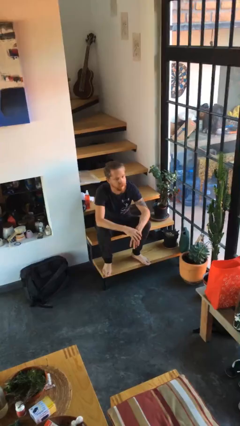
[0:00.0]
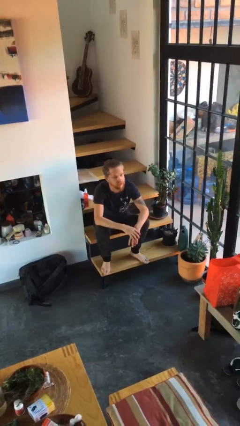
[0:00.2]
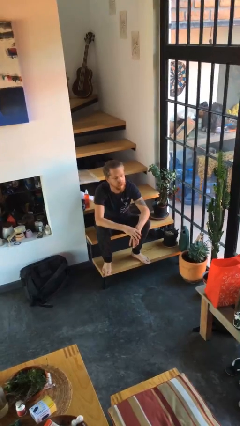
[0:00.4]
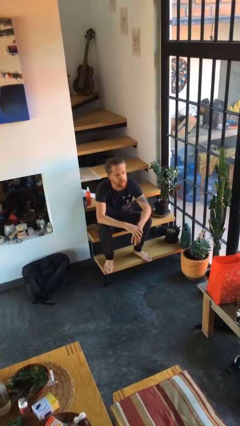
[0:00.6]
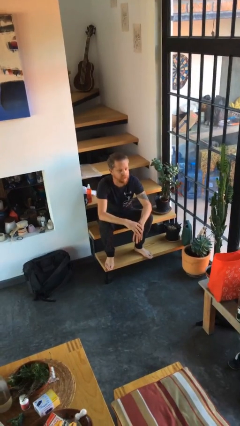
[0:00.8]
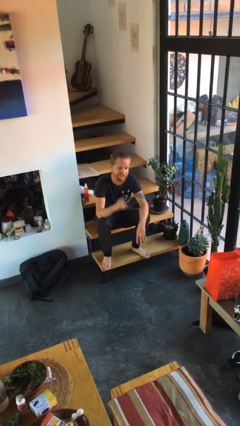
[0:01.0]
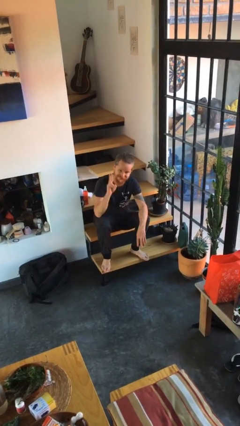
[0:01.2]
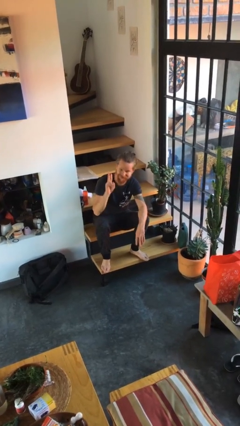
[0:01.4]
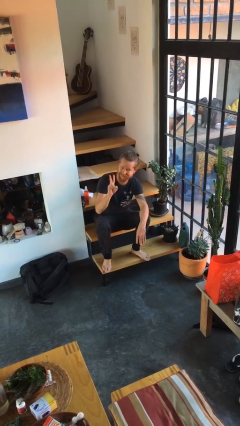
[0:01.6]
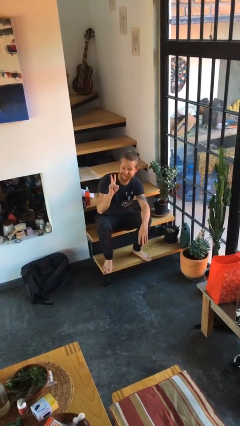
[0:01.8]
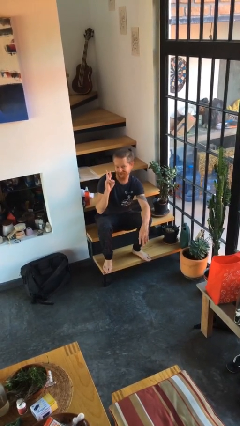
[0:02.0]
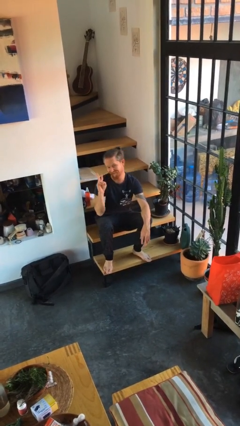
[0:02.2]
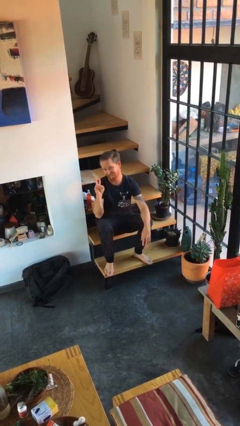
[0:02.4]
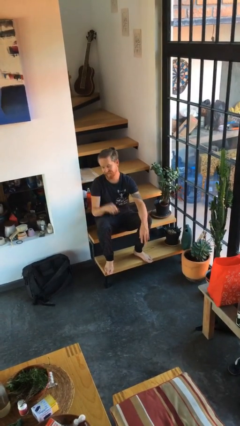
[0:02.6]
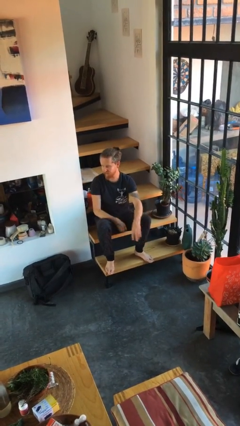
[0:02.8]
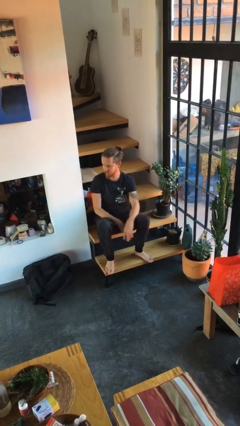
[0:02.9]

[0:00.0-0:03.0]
person gestures peace

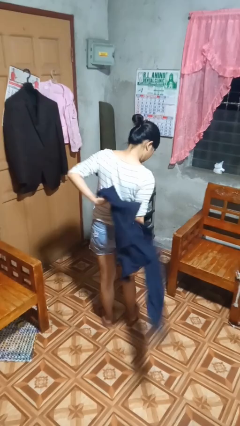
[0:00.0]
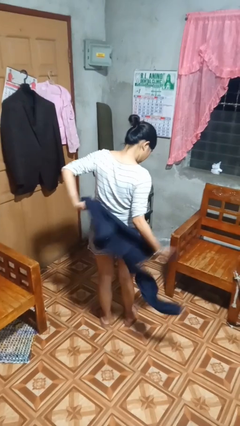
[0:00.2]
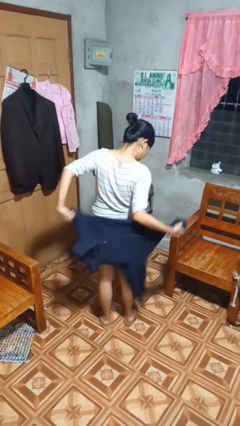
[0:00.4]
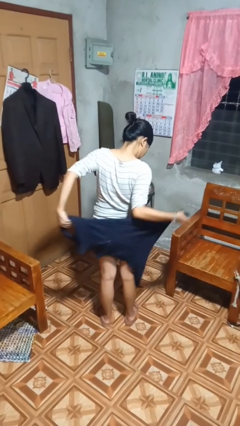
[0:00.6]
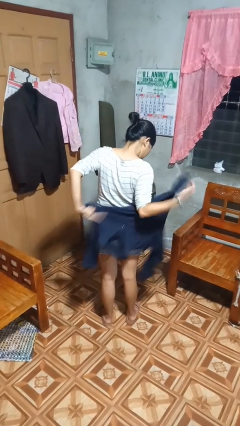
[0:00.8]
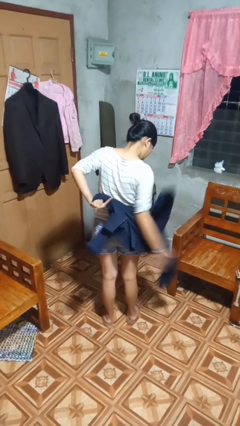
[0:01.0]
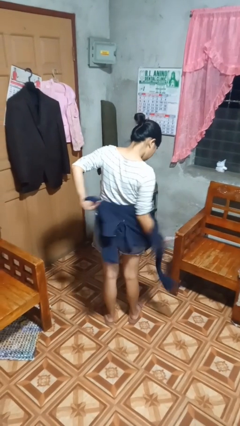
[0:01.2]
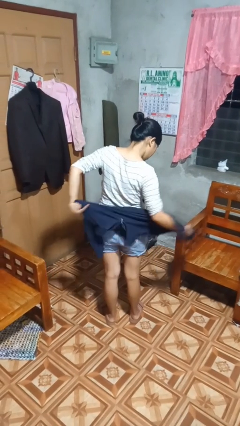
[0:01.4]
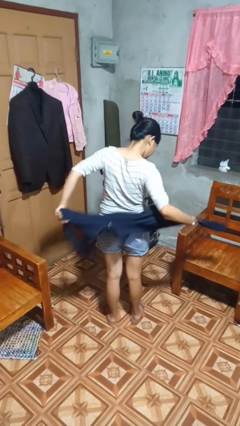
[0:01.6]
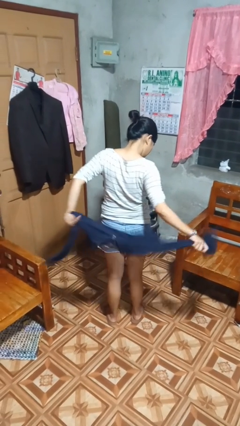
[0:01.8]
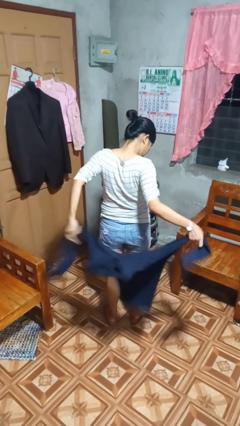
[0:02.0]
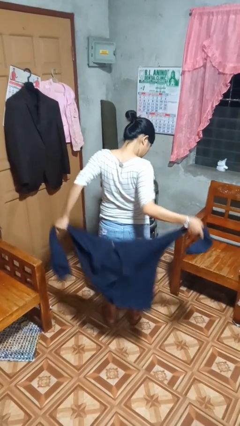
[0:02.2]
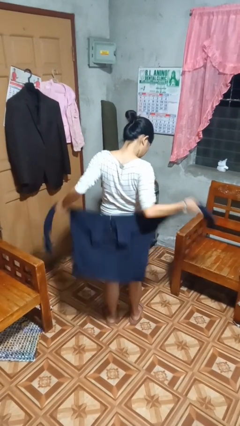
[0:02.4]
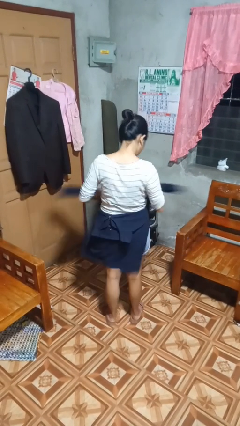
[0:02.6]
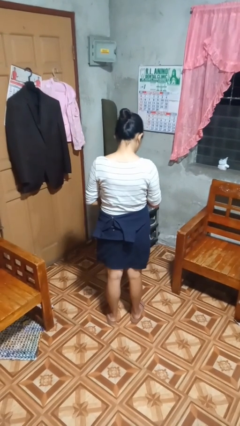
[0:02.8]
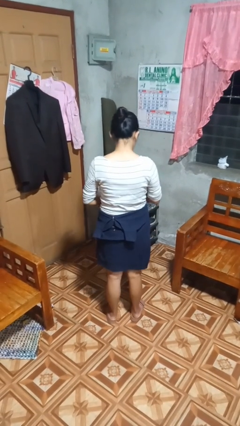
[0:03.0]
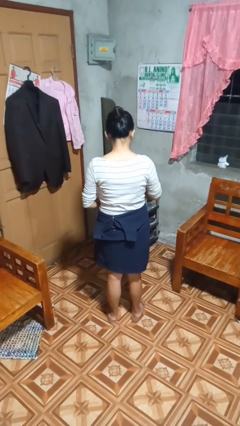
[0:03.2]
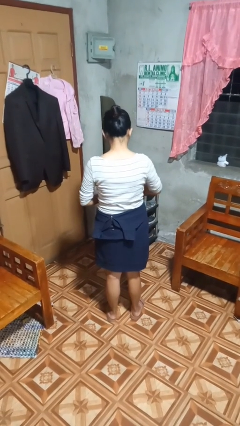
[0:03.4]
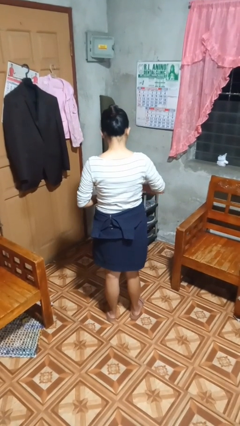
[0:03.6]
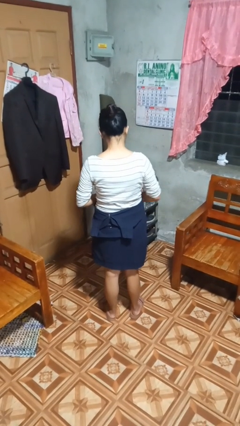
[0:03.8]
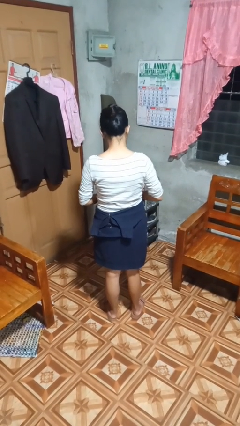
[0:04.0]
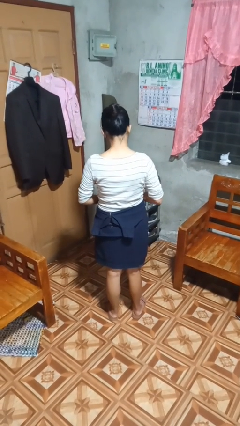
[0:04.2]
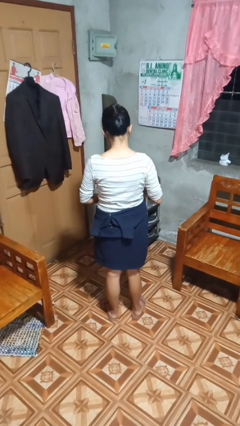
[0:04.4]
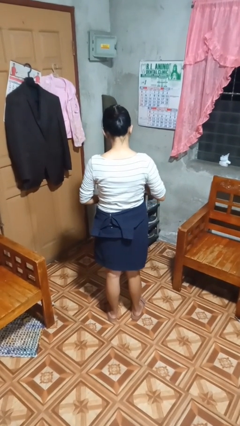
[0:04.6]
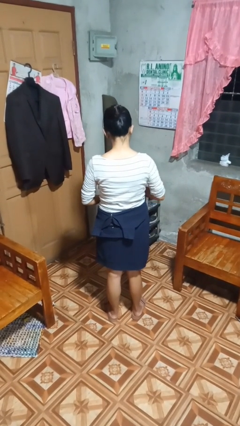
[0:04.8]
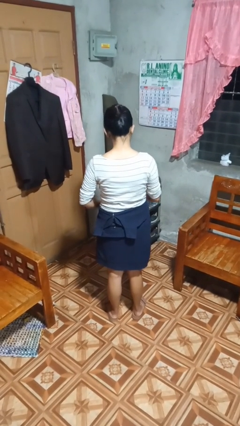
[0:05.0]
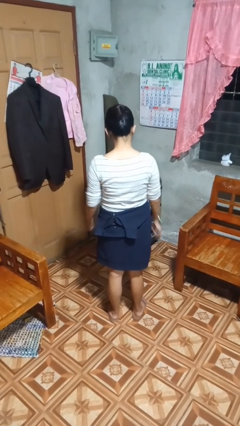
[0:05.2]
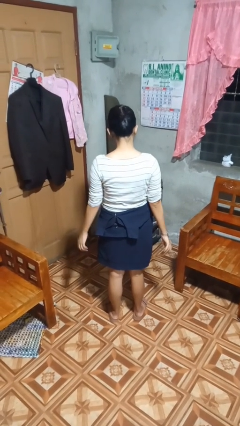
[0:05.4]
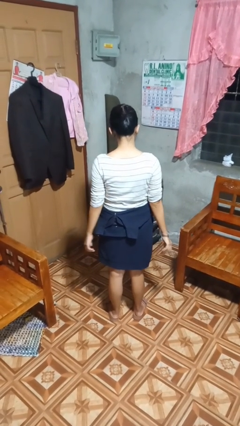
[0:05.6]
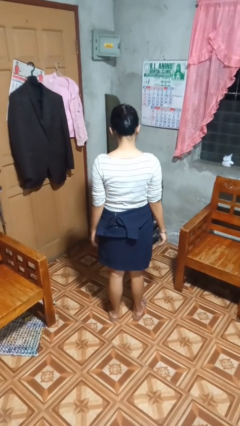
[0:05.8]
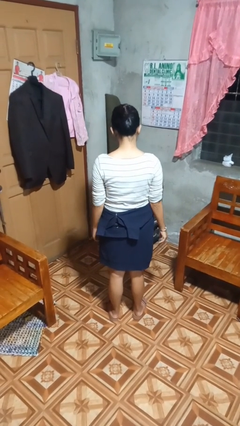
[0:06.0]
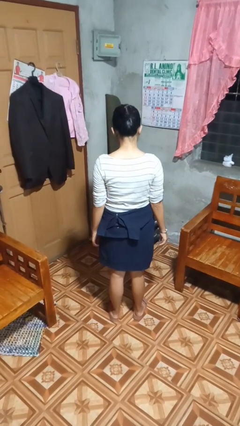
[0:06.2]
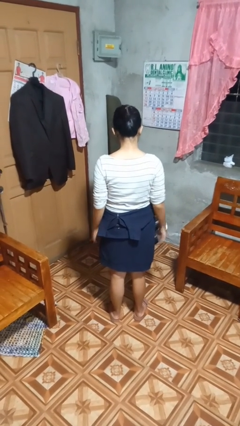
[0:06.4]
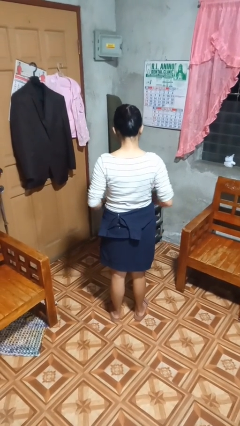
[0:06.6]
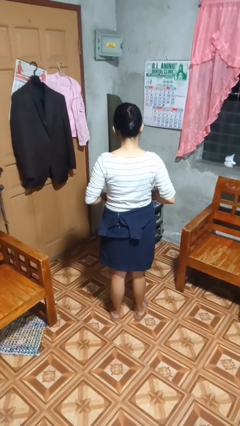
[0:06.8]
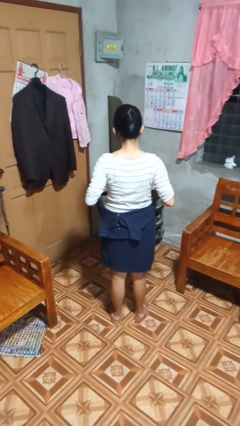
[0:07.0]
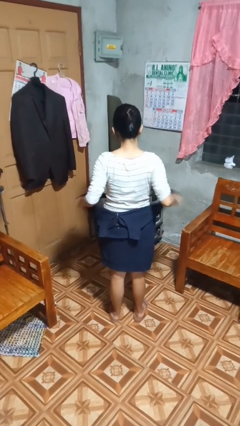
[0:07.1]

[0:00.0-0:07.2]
person ties jacket around waist

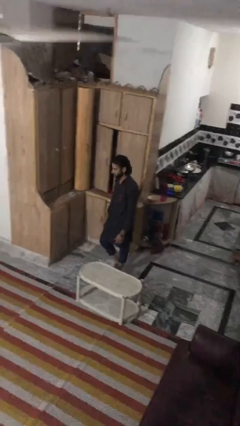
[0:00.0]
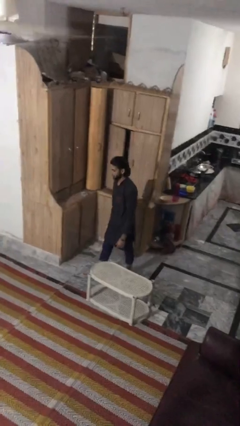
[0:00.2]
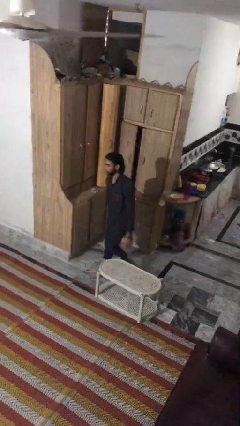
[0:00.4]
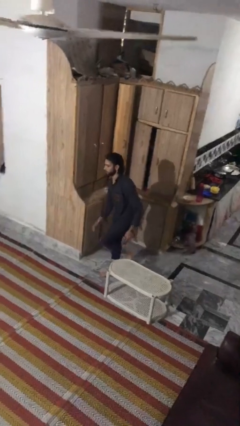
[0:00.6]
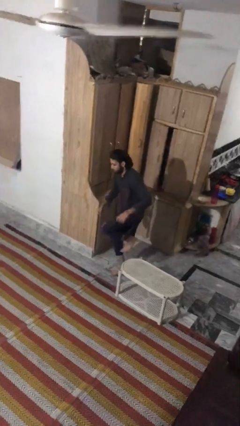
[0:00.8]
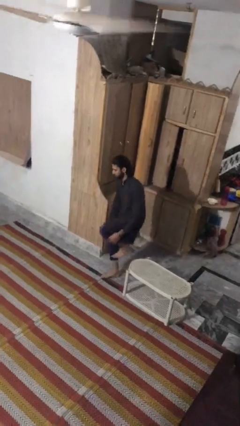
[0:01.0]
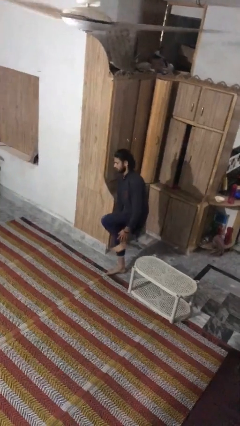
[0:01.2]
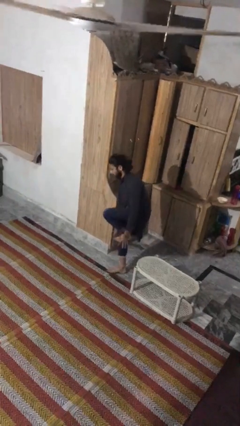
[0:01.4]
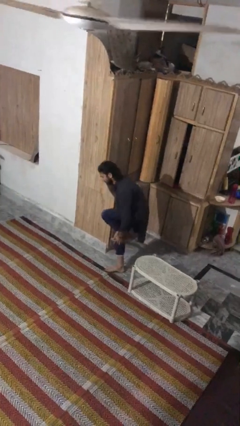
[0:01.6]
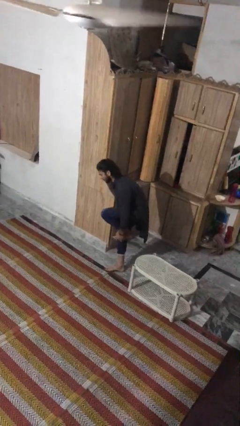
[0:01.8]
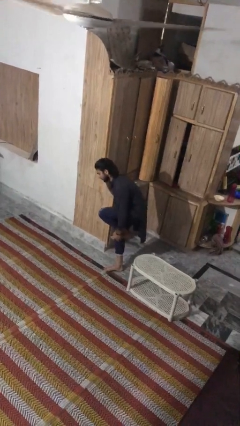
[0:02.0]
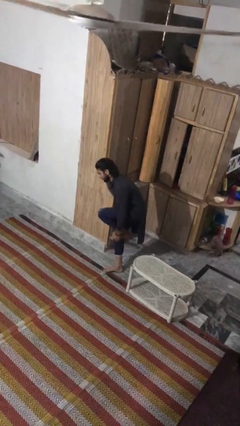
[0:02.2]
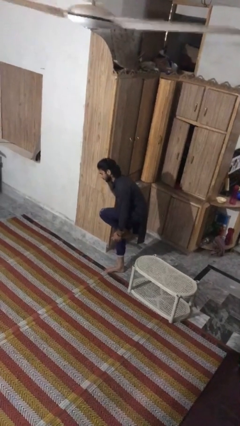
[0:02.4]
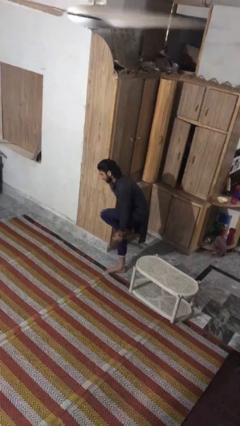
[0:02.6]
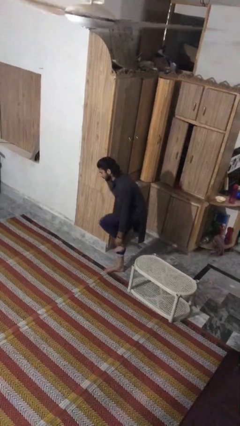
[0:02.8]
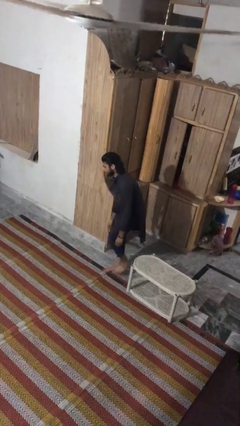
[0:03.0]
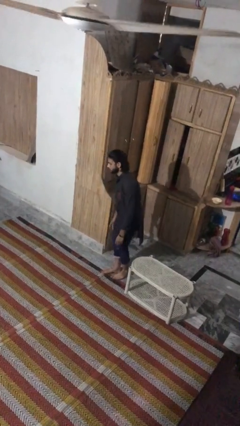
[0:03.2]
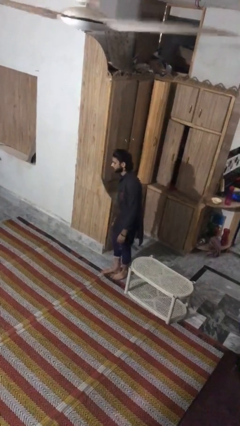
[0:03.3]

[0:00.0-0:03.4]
person bumps into table

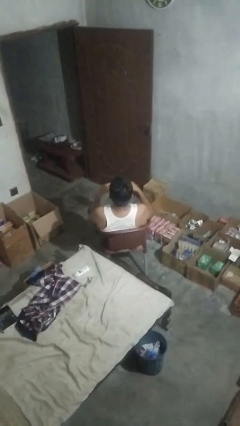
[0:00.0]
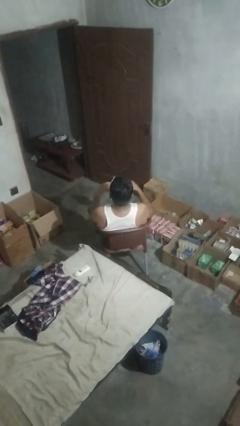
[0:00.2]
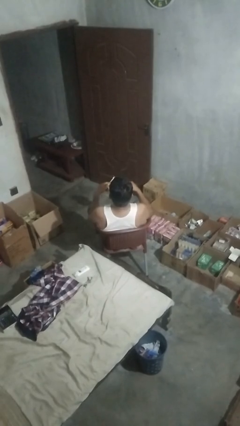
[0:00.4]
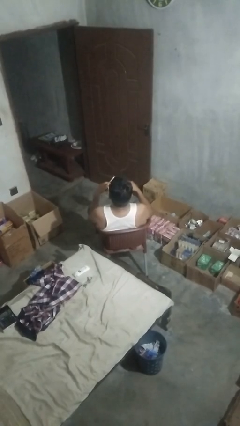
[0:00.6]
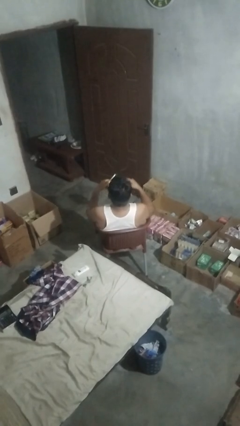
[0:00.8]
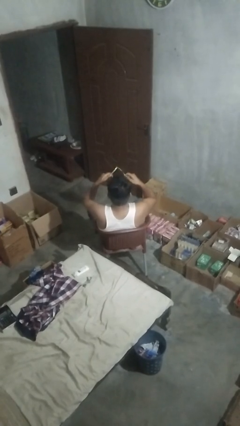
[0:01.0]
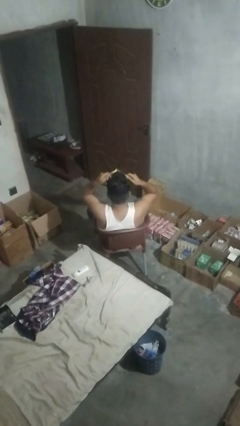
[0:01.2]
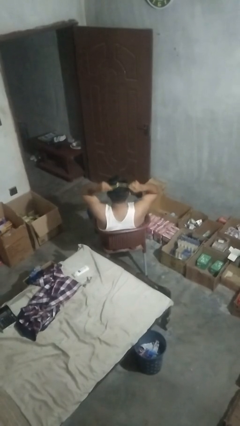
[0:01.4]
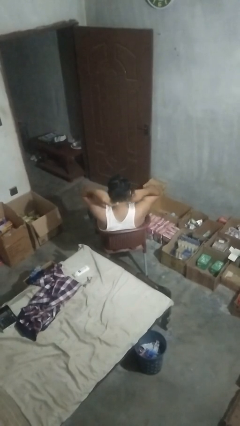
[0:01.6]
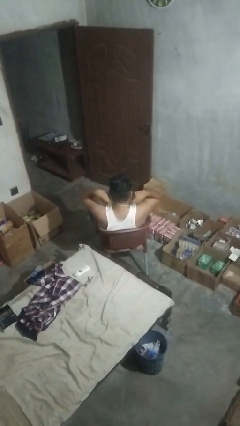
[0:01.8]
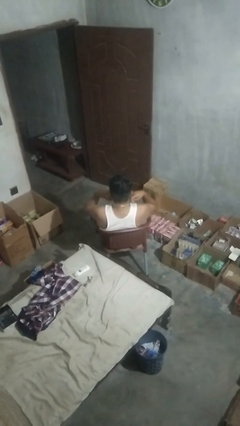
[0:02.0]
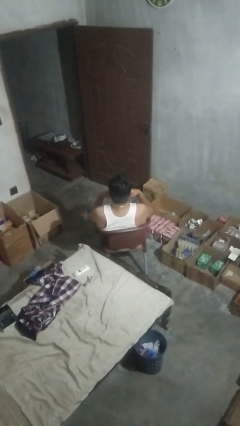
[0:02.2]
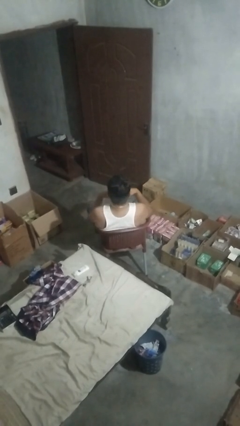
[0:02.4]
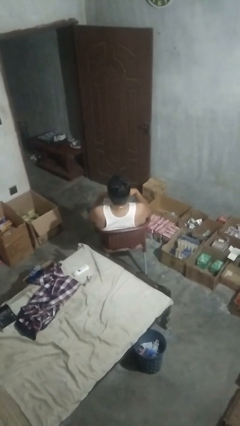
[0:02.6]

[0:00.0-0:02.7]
person puts on necklace

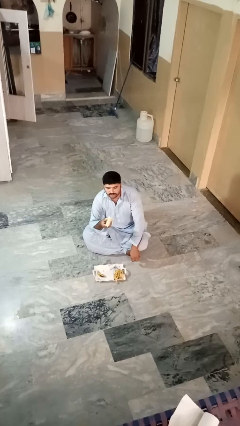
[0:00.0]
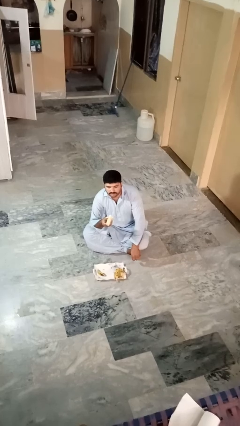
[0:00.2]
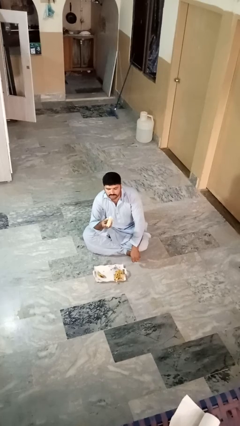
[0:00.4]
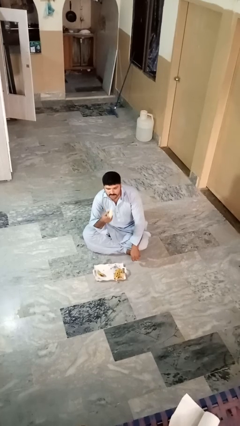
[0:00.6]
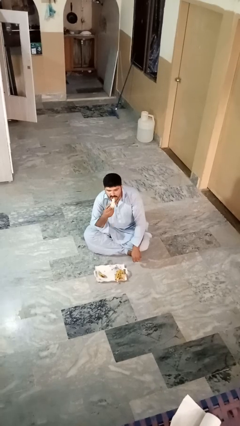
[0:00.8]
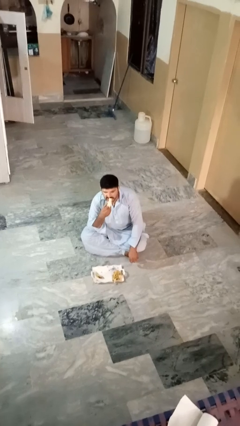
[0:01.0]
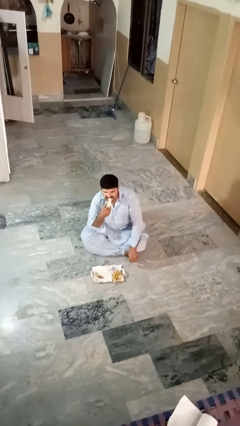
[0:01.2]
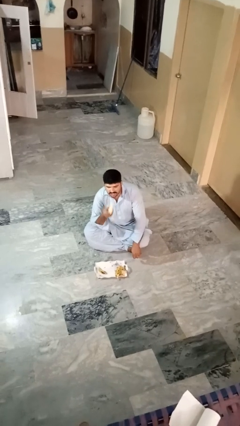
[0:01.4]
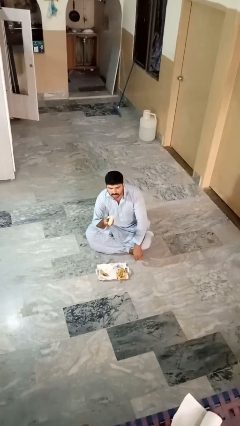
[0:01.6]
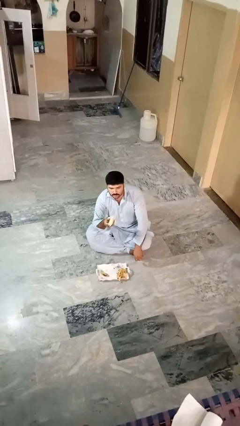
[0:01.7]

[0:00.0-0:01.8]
person eats banana
